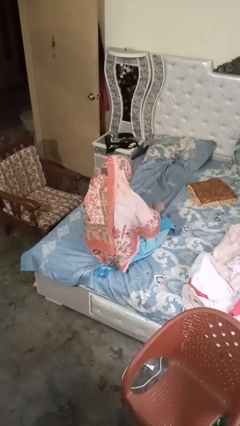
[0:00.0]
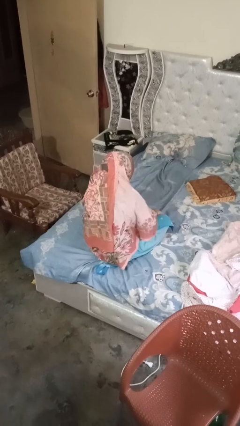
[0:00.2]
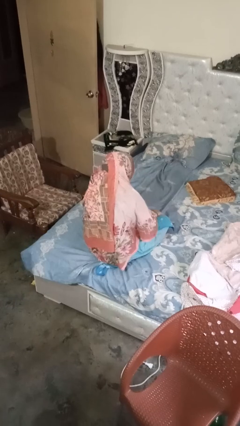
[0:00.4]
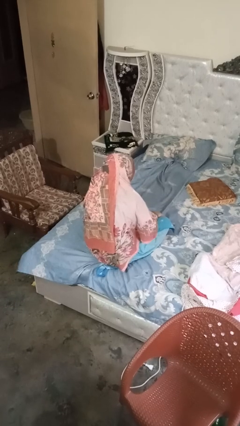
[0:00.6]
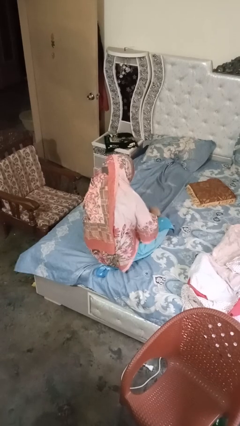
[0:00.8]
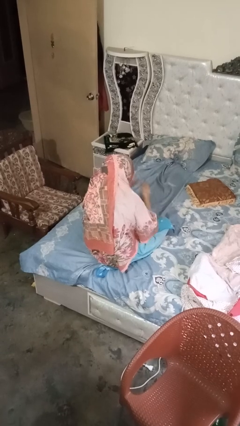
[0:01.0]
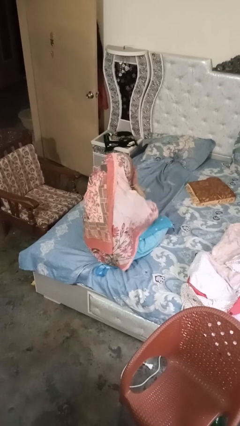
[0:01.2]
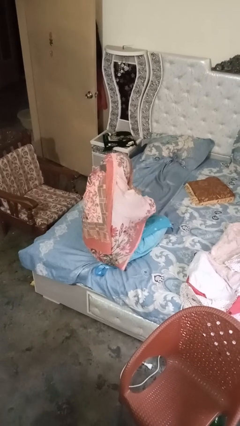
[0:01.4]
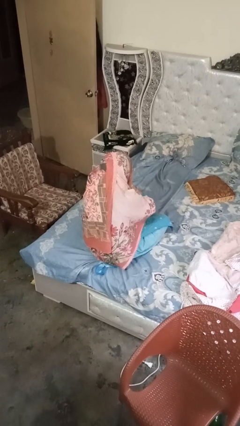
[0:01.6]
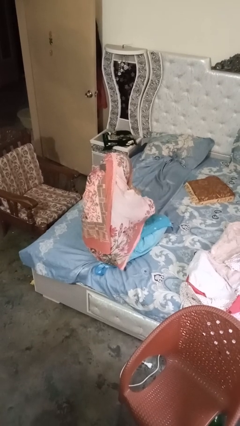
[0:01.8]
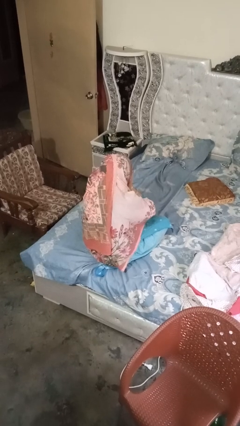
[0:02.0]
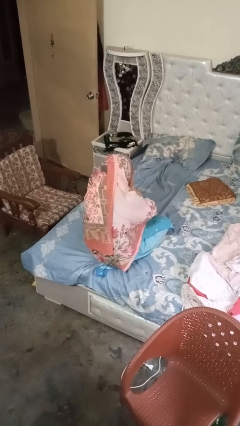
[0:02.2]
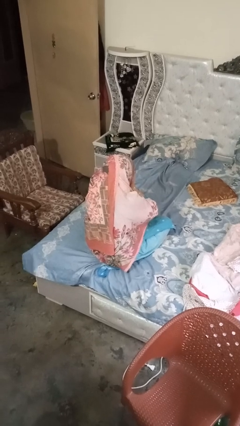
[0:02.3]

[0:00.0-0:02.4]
person covers face with hands

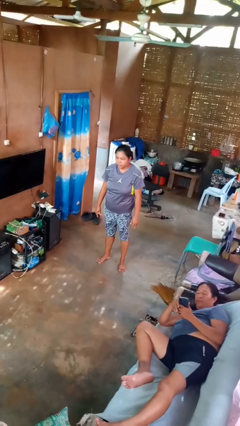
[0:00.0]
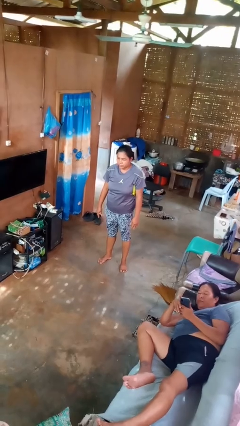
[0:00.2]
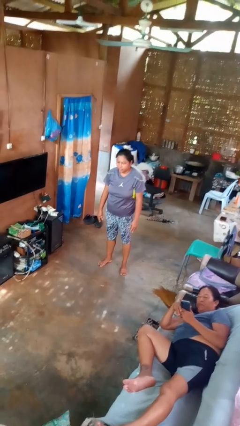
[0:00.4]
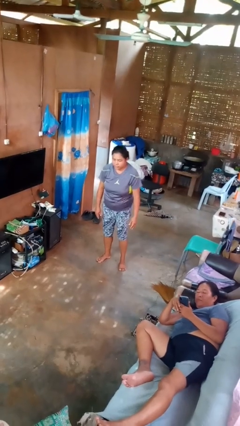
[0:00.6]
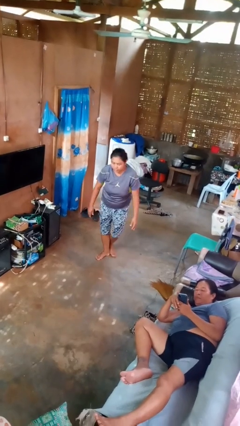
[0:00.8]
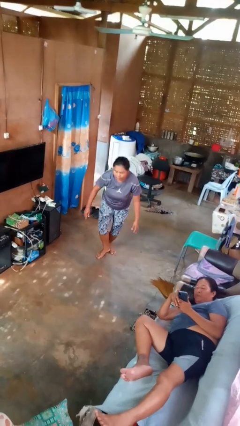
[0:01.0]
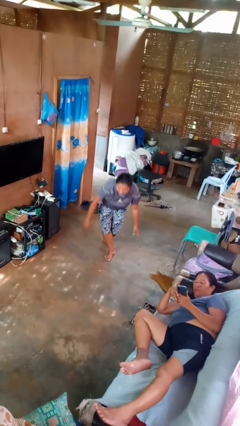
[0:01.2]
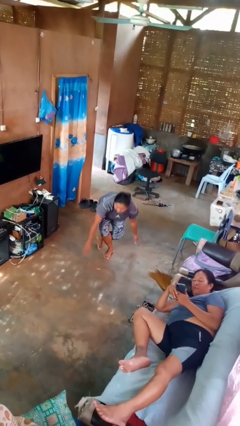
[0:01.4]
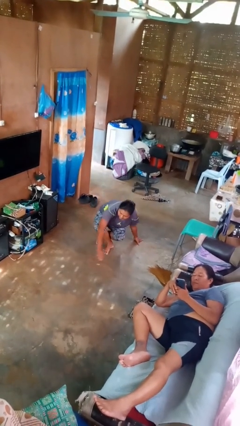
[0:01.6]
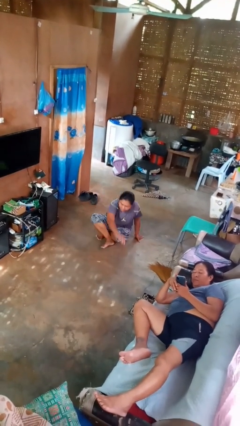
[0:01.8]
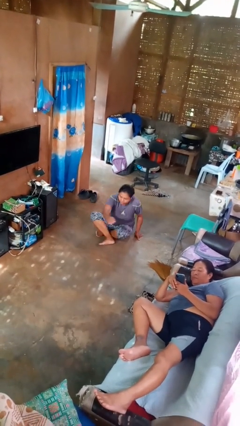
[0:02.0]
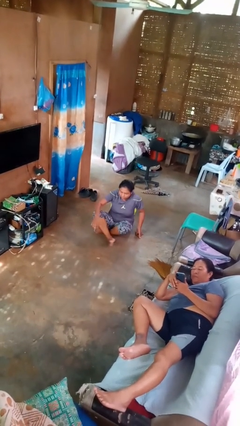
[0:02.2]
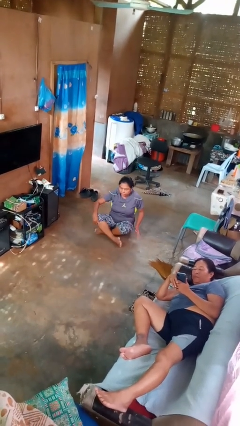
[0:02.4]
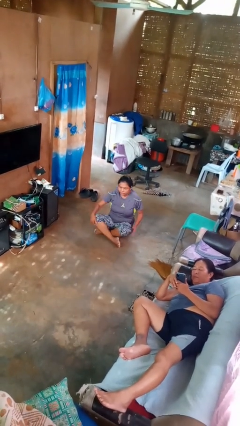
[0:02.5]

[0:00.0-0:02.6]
person sits crisscross

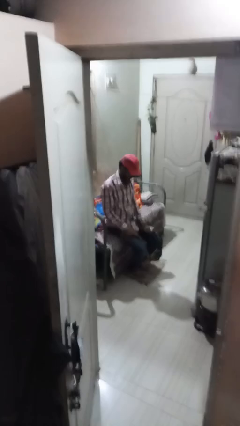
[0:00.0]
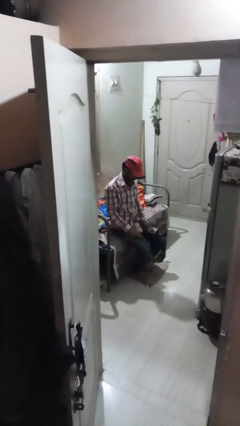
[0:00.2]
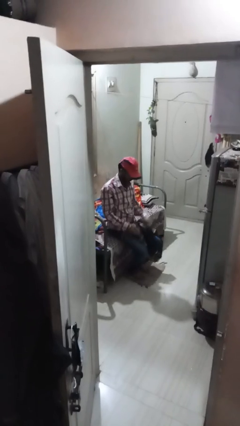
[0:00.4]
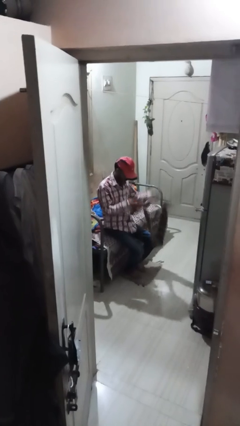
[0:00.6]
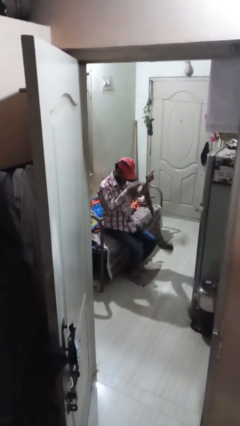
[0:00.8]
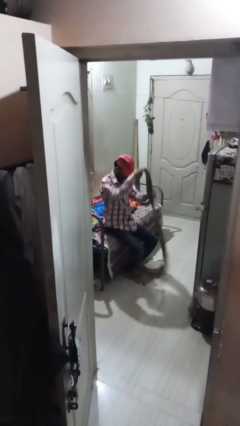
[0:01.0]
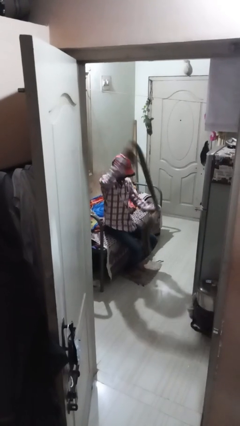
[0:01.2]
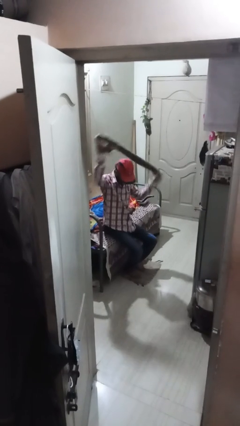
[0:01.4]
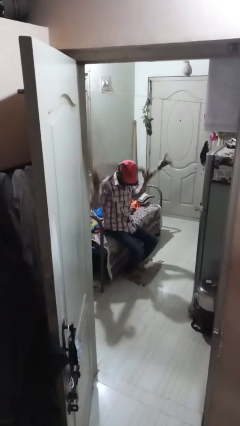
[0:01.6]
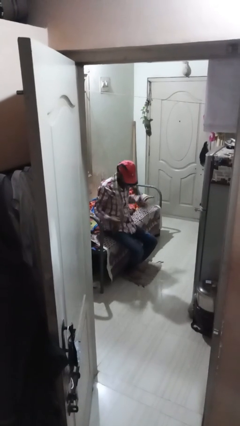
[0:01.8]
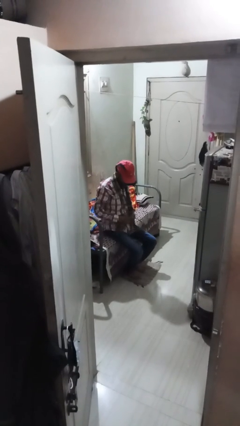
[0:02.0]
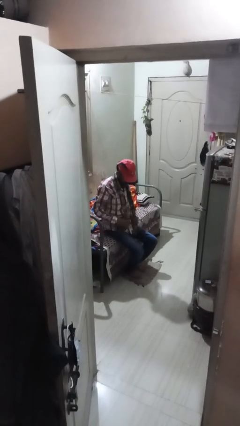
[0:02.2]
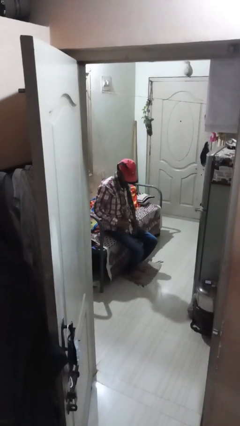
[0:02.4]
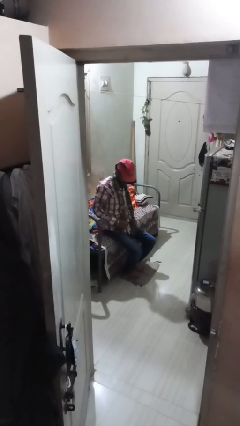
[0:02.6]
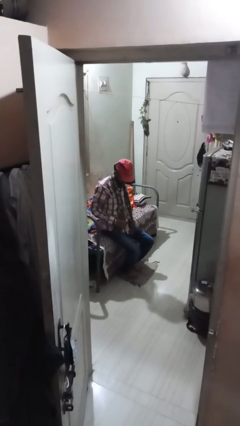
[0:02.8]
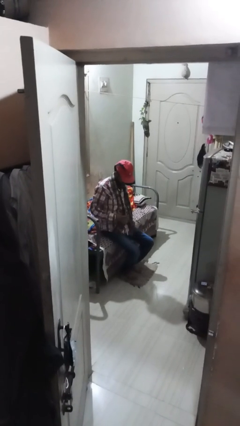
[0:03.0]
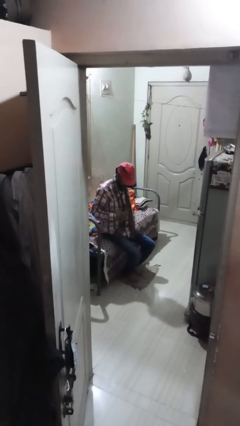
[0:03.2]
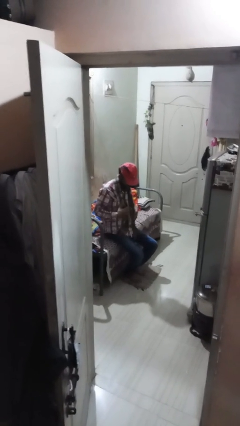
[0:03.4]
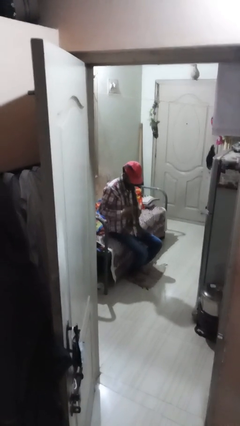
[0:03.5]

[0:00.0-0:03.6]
person puts on scarf

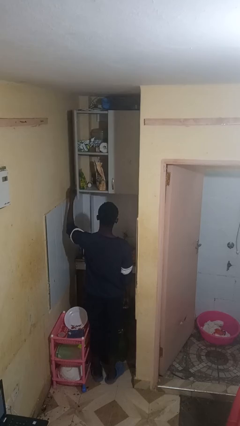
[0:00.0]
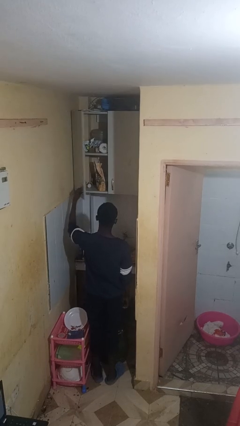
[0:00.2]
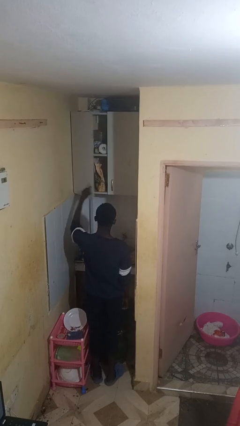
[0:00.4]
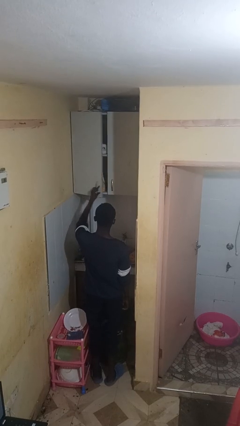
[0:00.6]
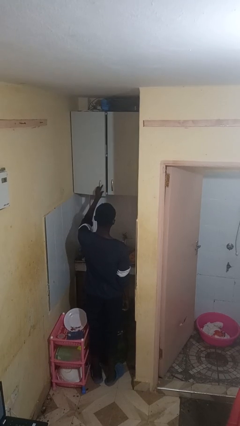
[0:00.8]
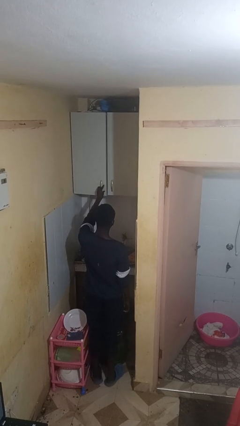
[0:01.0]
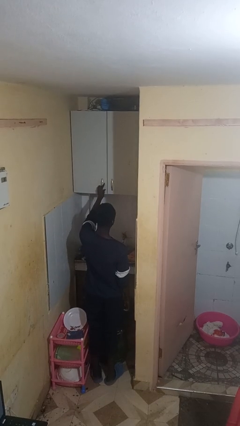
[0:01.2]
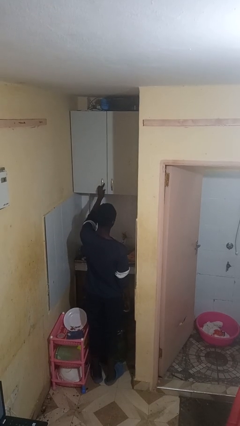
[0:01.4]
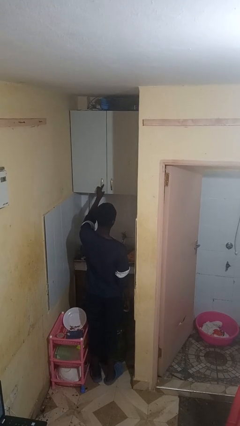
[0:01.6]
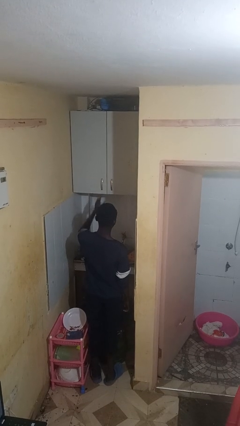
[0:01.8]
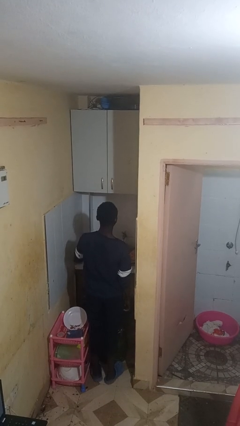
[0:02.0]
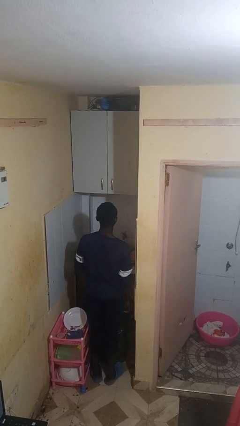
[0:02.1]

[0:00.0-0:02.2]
person closes cabinet

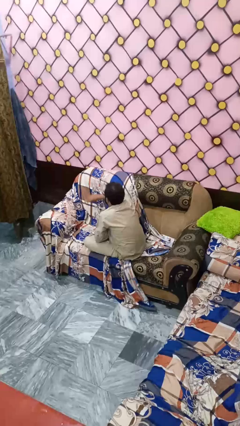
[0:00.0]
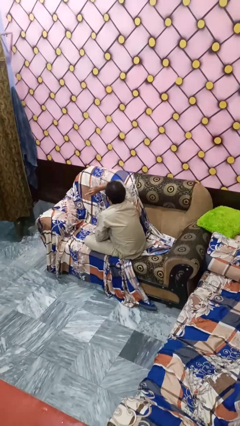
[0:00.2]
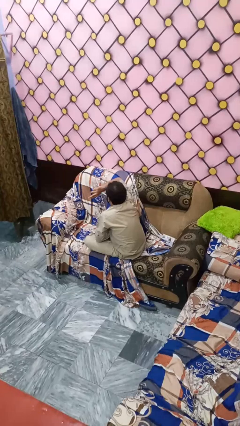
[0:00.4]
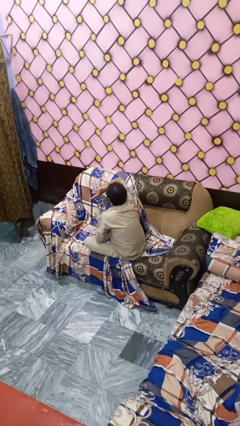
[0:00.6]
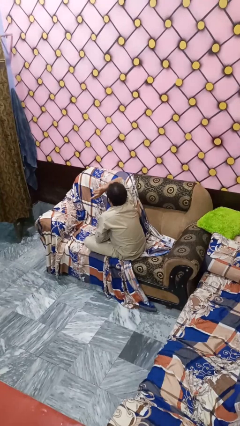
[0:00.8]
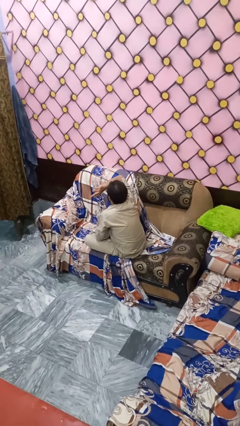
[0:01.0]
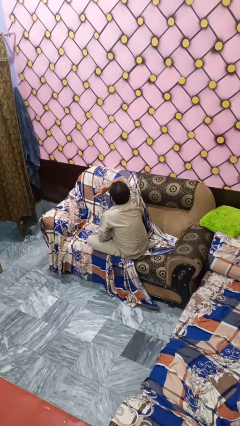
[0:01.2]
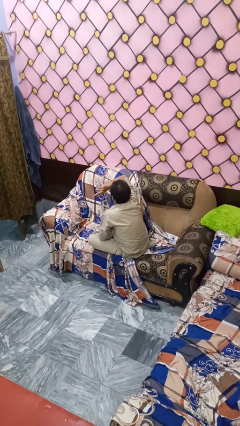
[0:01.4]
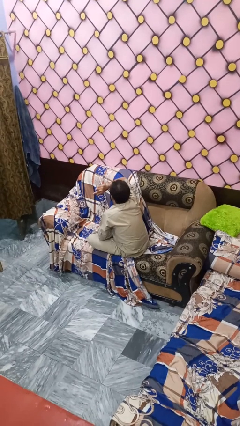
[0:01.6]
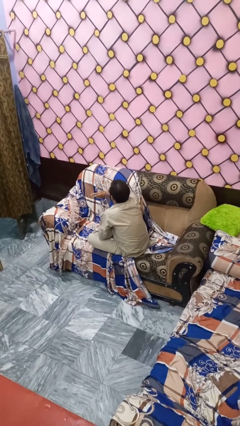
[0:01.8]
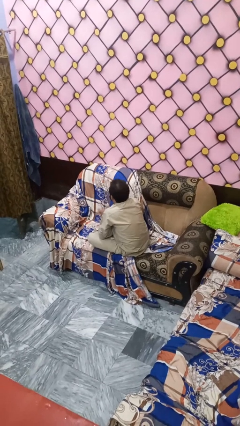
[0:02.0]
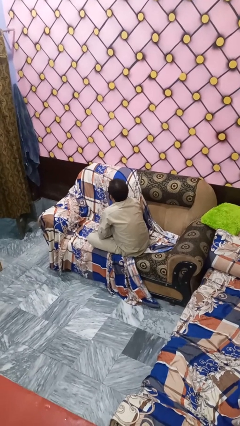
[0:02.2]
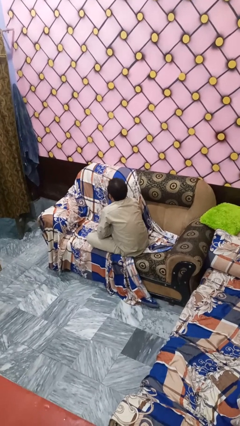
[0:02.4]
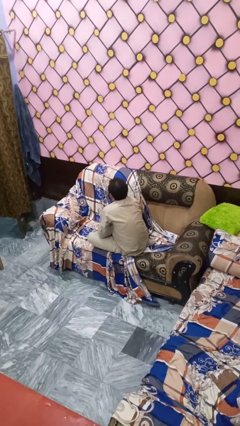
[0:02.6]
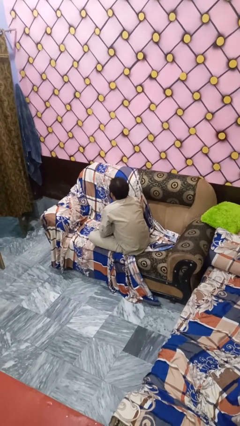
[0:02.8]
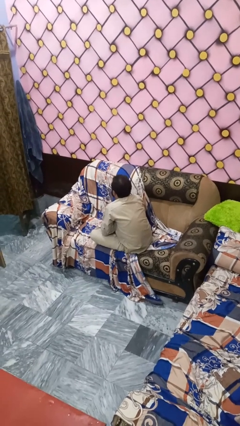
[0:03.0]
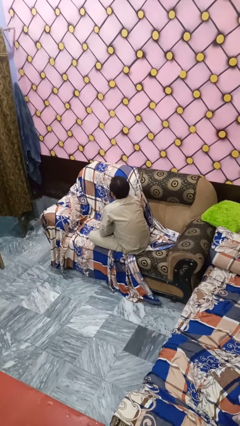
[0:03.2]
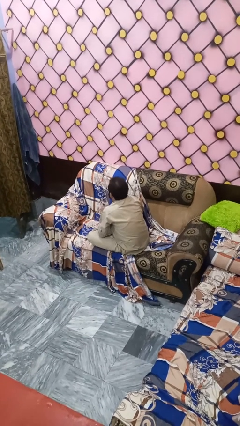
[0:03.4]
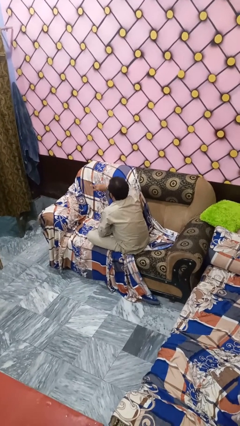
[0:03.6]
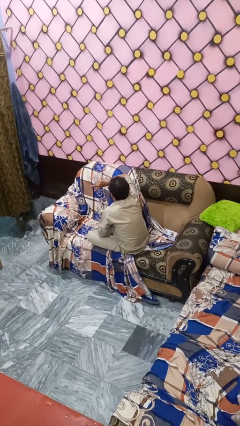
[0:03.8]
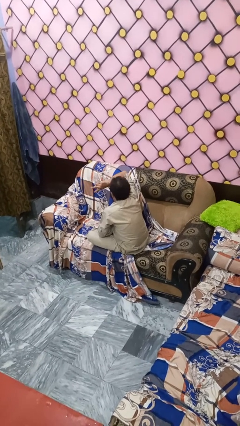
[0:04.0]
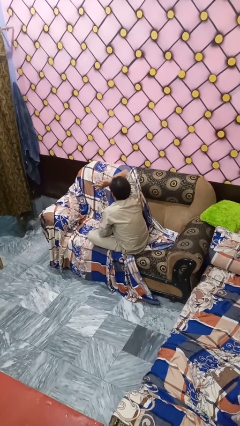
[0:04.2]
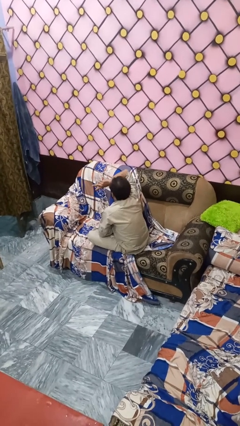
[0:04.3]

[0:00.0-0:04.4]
person gestures watch closely

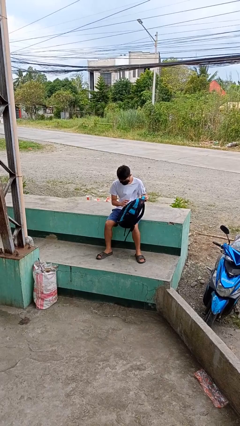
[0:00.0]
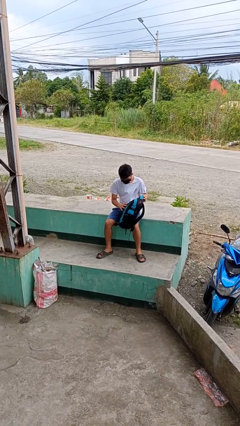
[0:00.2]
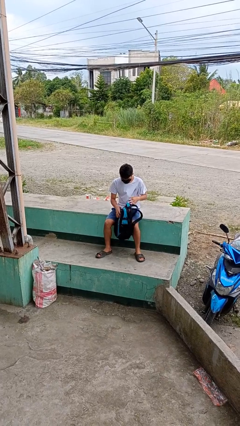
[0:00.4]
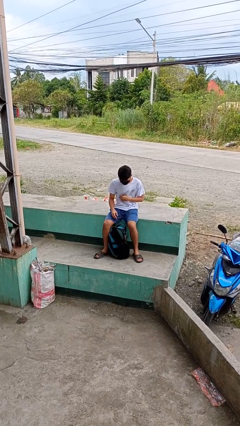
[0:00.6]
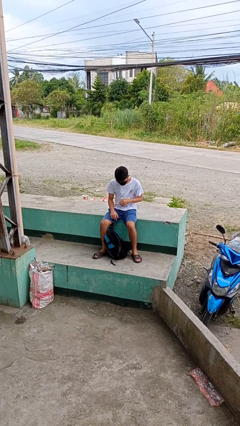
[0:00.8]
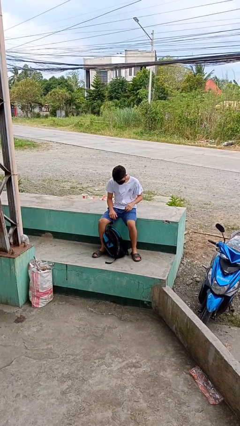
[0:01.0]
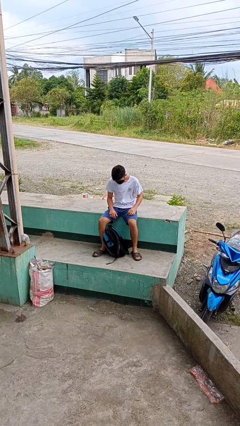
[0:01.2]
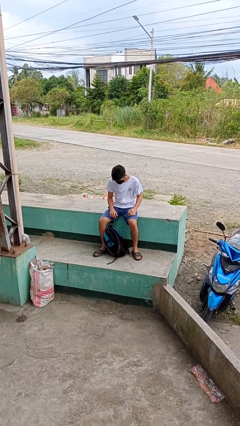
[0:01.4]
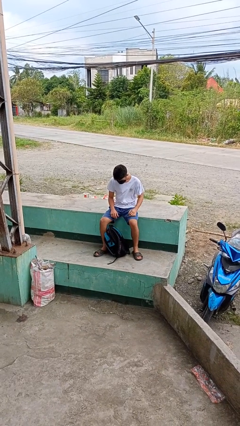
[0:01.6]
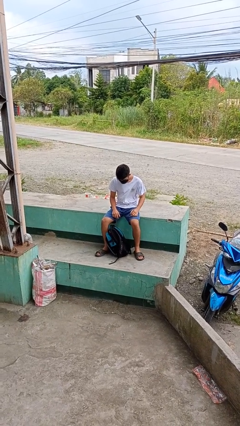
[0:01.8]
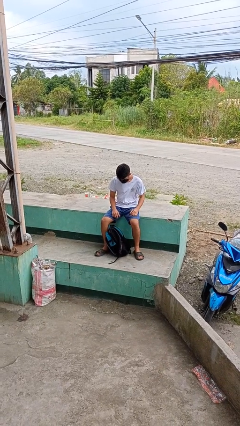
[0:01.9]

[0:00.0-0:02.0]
person drops object
